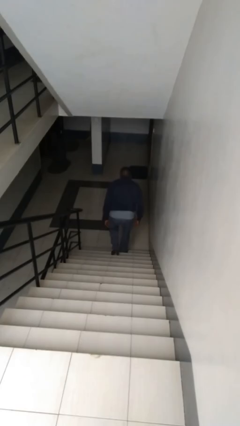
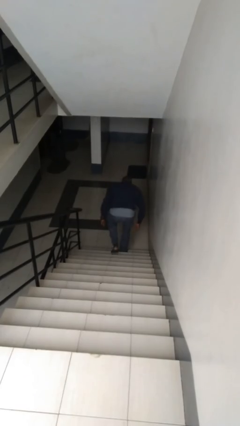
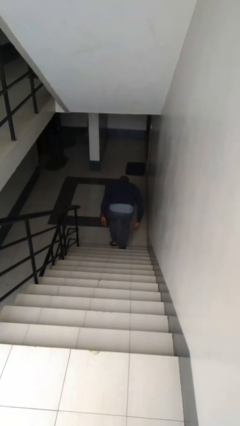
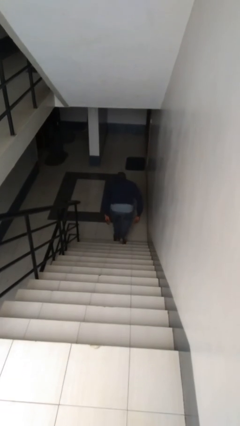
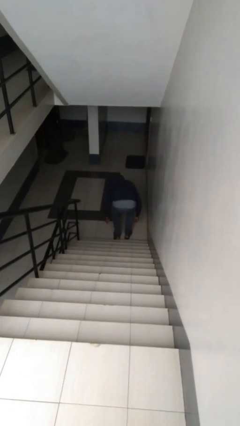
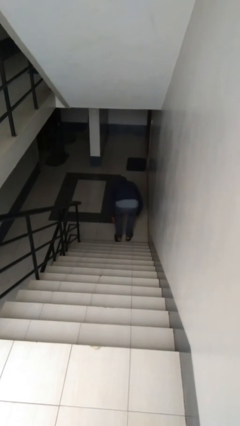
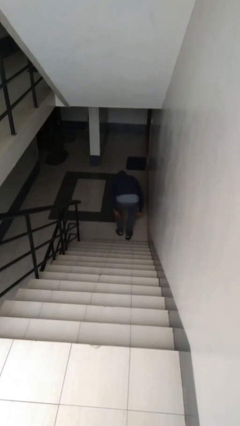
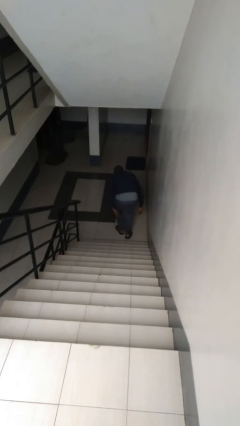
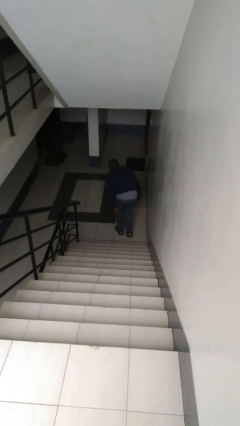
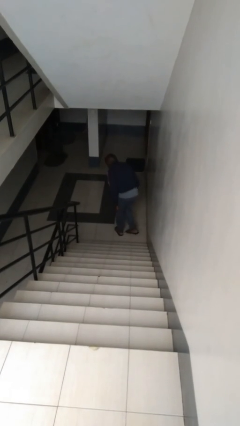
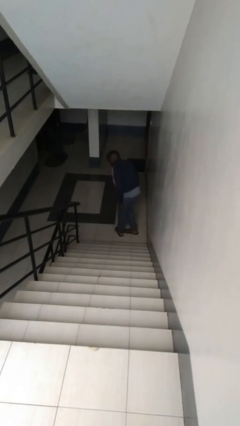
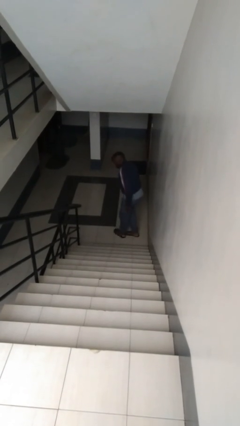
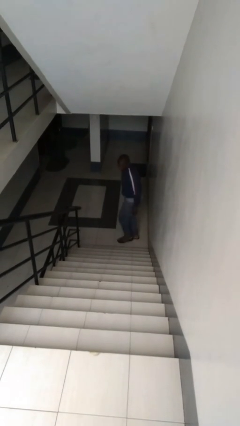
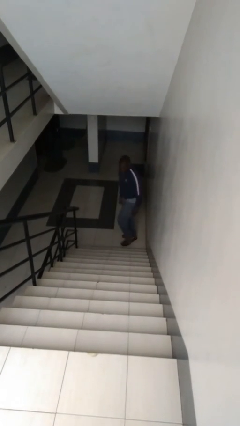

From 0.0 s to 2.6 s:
person trips on stair

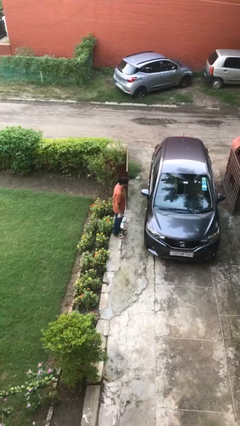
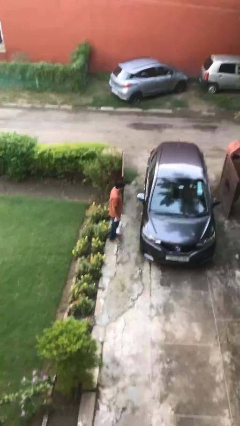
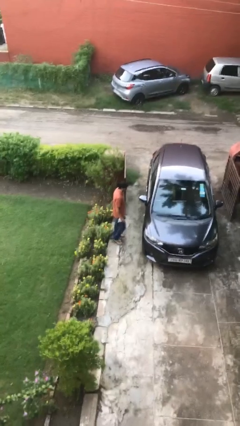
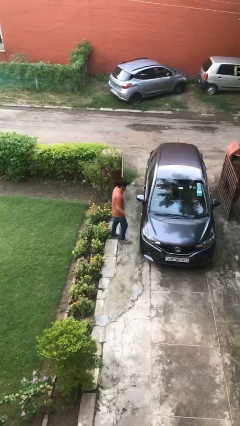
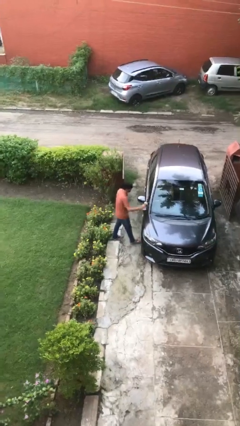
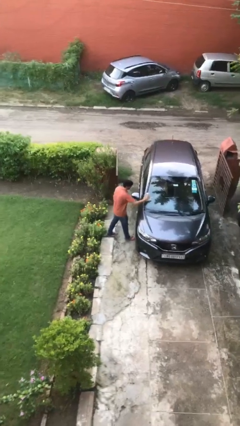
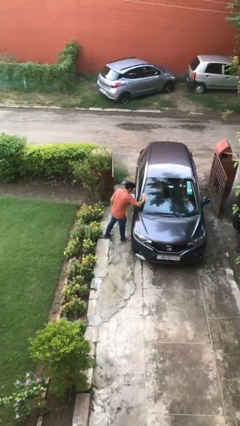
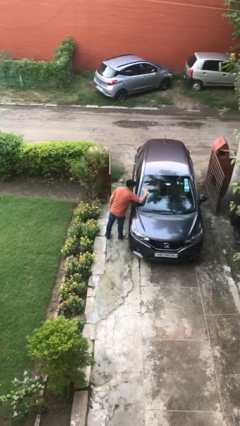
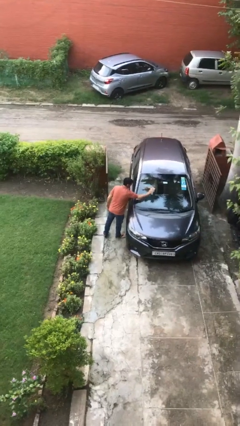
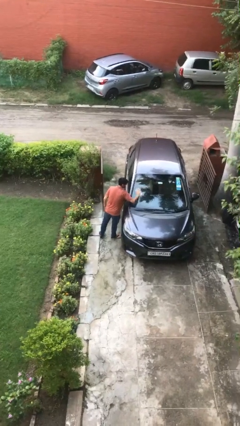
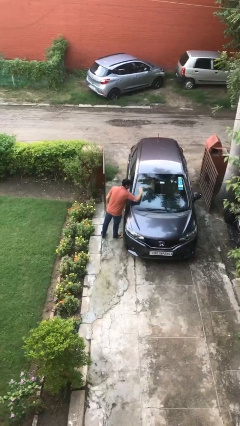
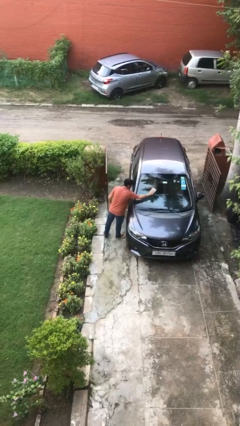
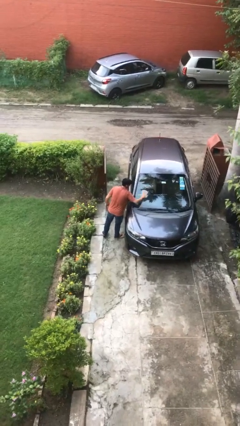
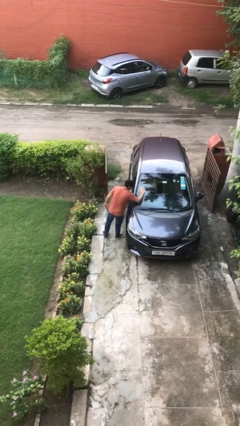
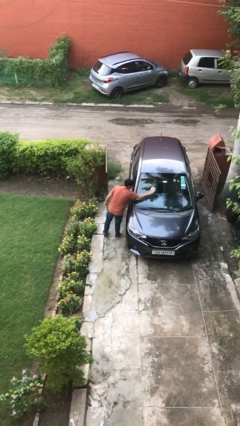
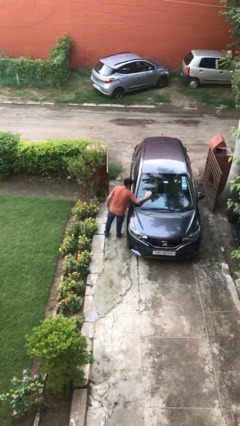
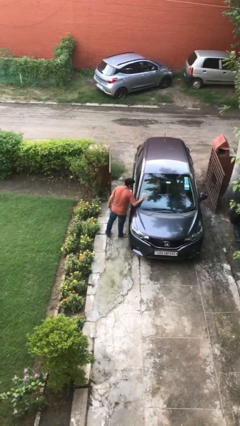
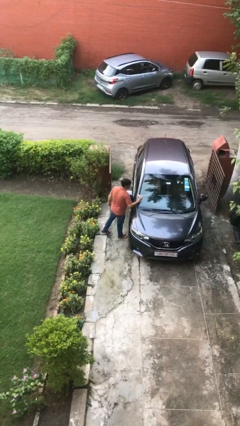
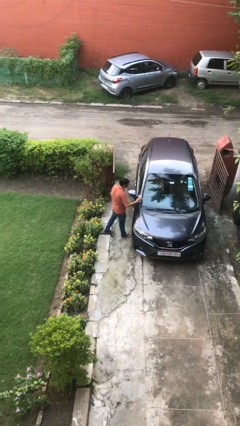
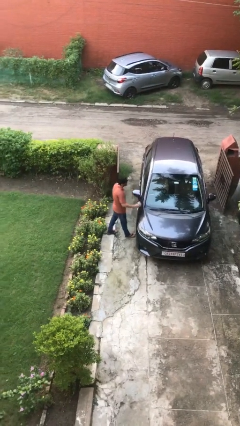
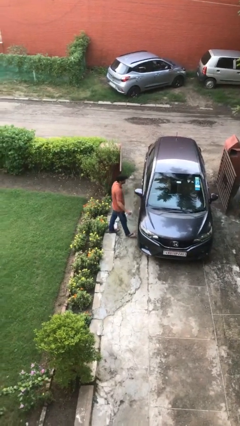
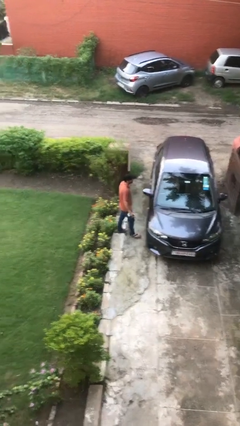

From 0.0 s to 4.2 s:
person polishes car with rag

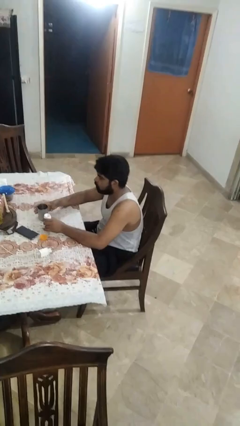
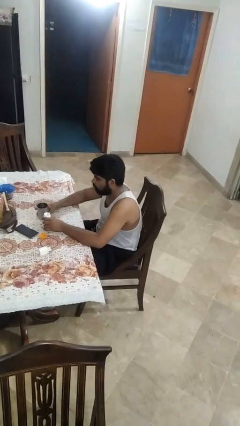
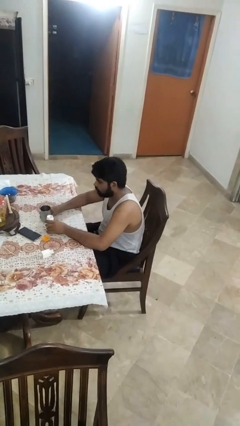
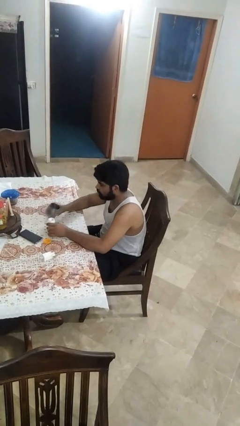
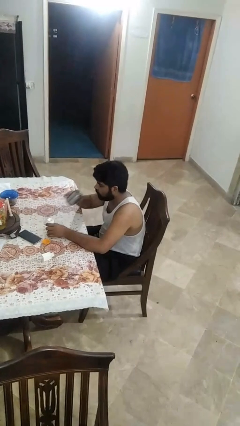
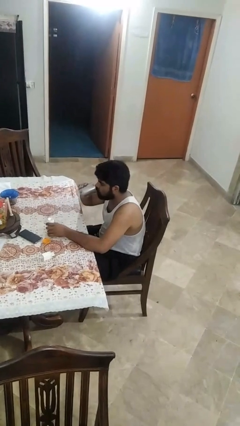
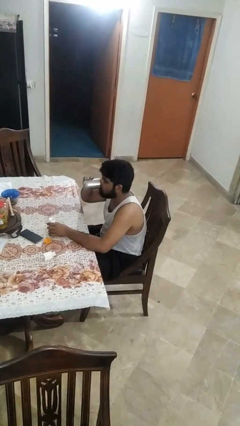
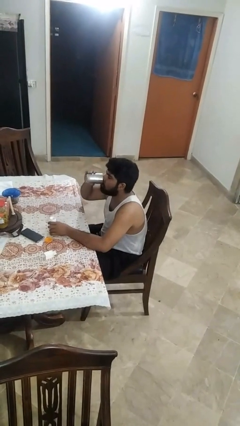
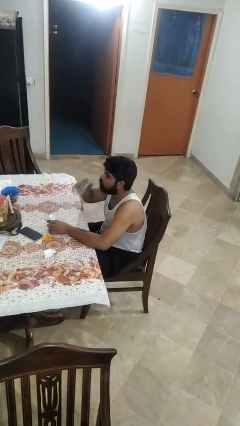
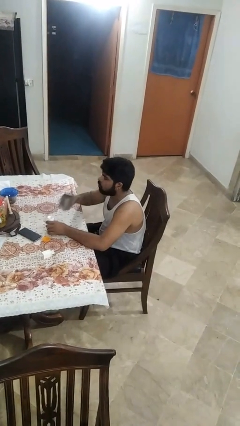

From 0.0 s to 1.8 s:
person drinks from cup

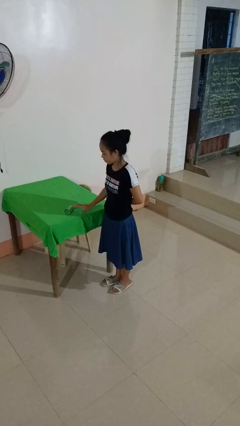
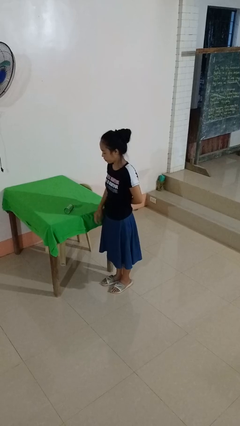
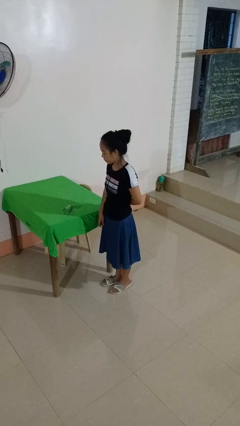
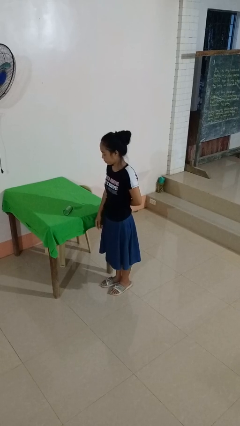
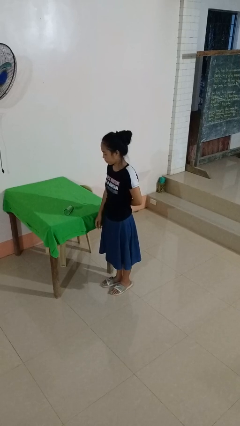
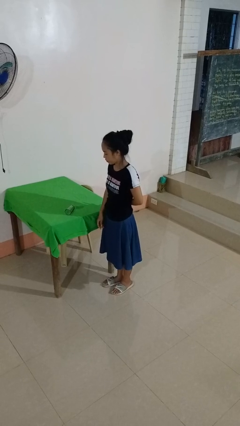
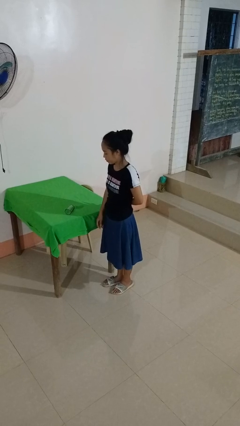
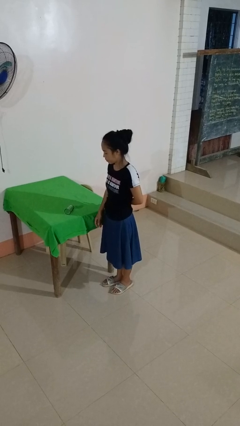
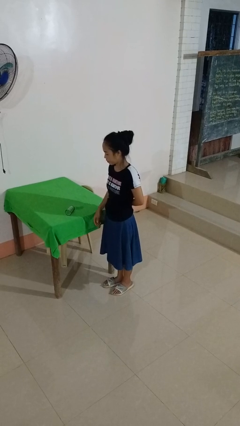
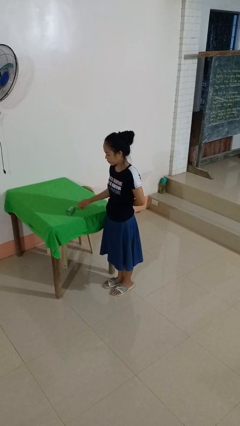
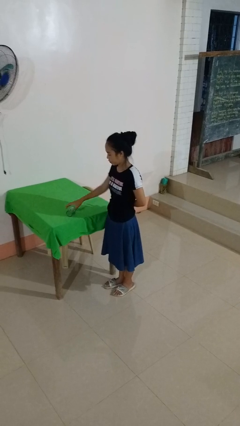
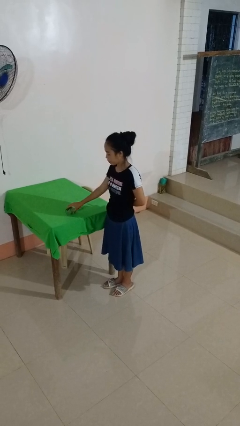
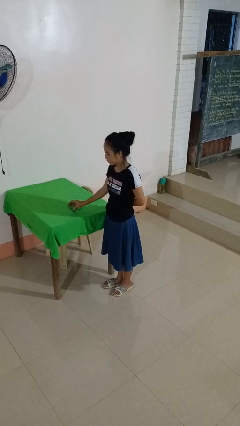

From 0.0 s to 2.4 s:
person knocks over glass

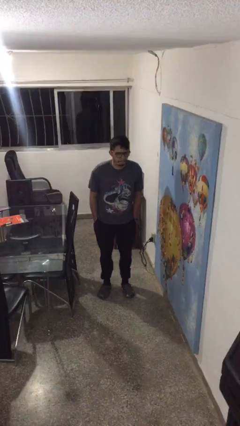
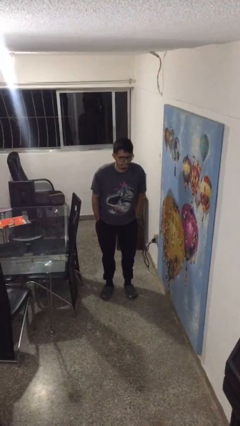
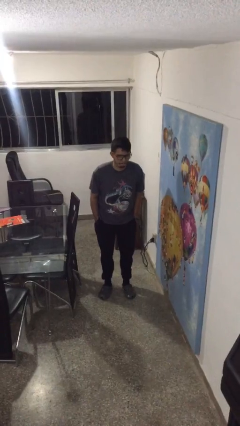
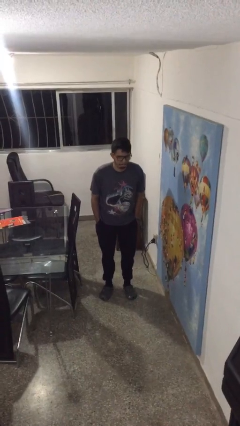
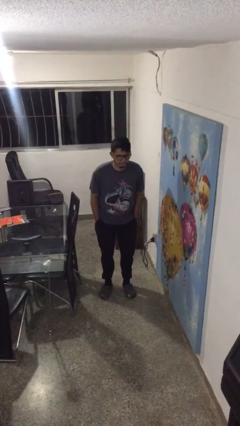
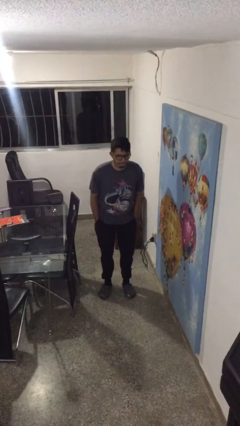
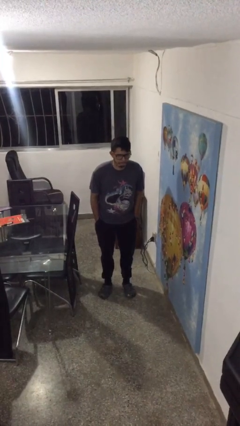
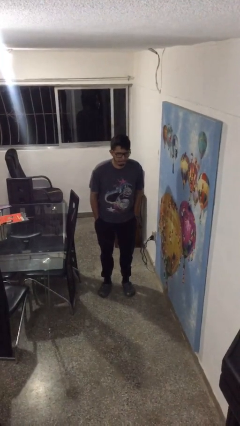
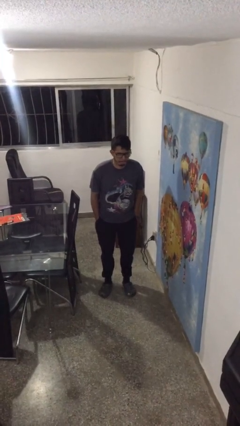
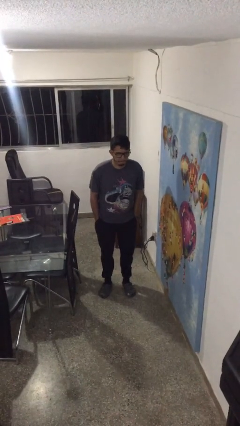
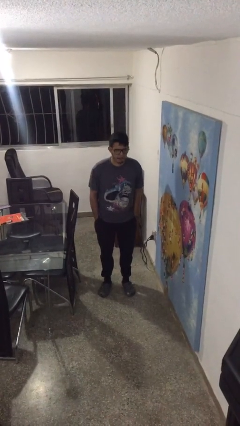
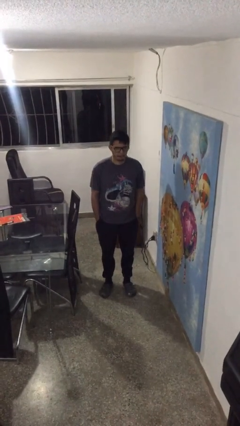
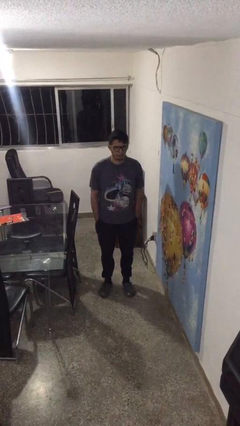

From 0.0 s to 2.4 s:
person sticks out tongue

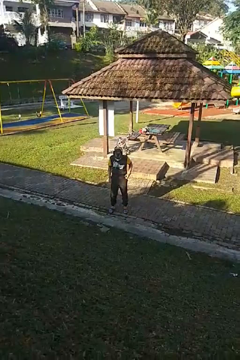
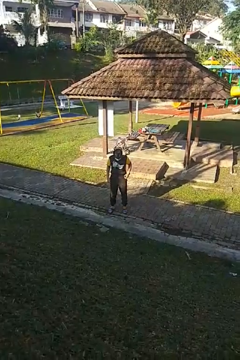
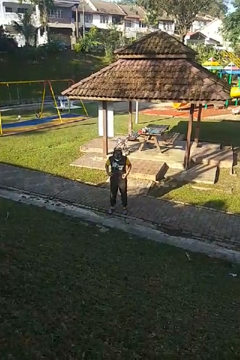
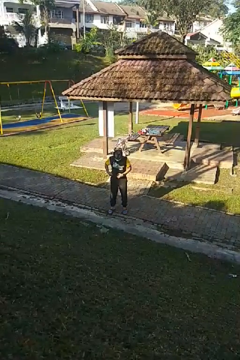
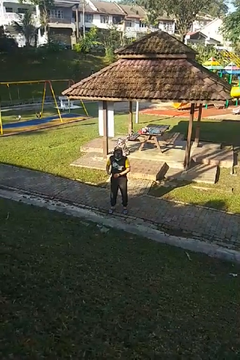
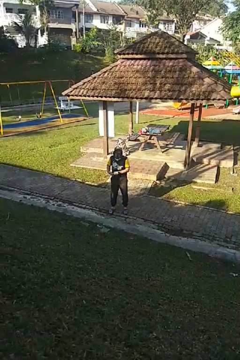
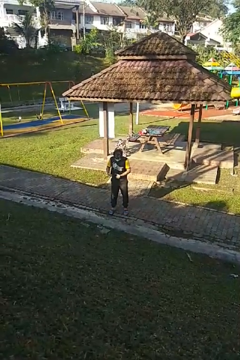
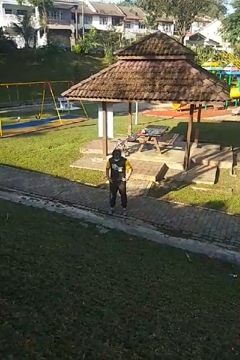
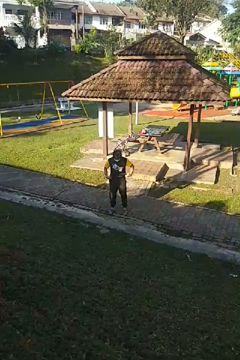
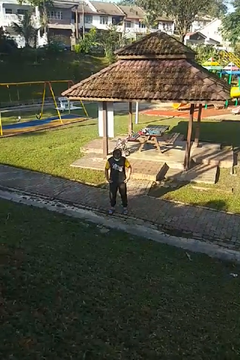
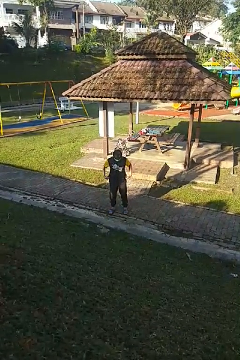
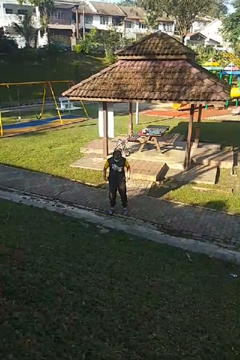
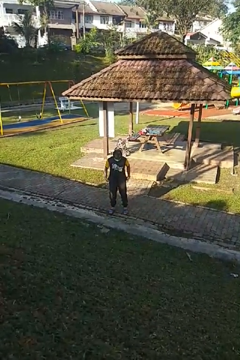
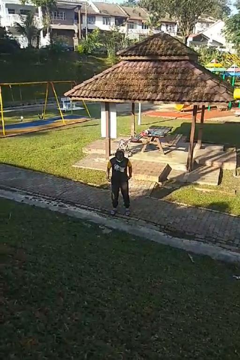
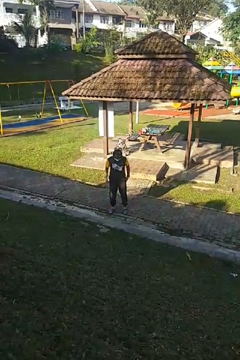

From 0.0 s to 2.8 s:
person untucks shirt

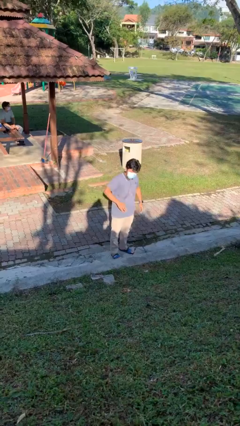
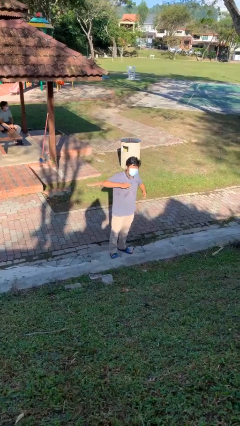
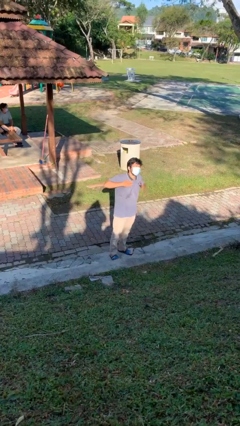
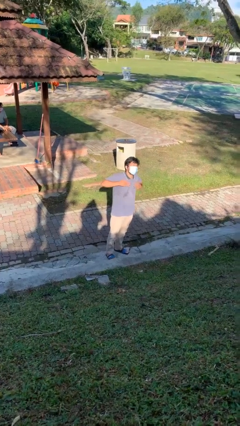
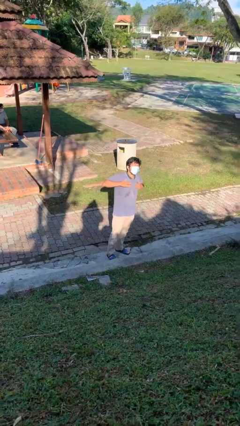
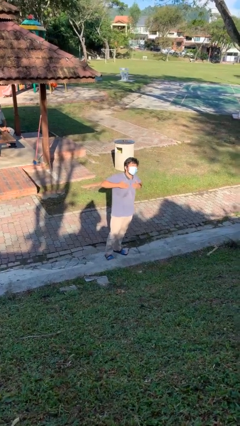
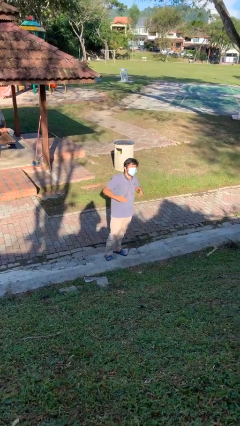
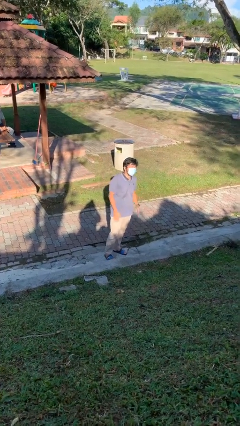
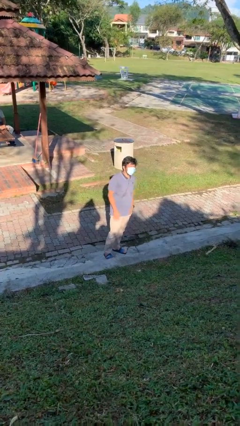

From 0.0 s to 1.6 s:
person drums on chest
